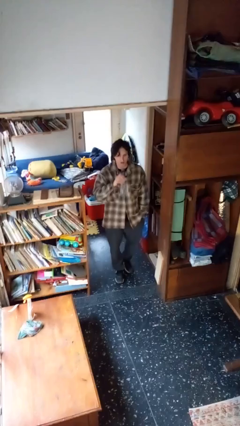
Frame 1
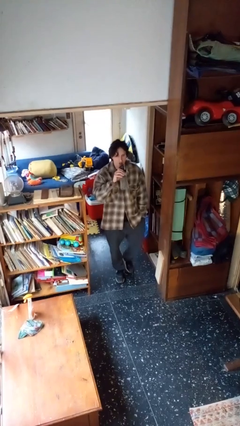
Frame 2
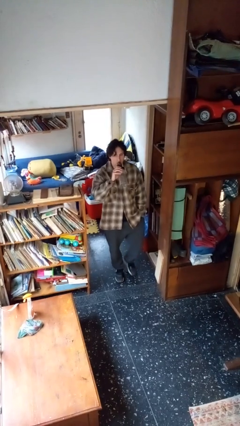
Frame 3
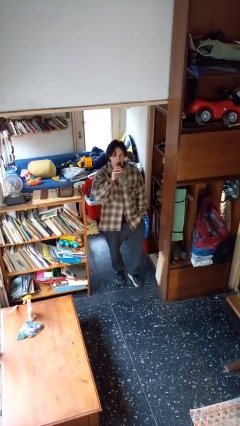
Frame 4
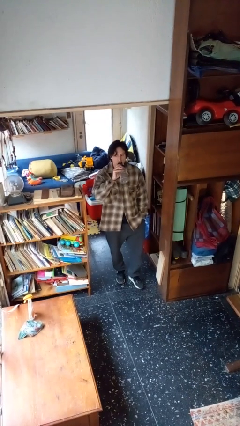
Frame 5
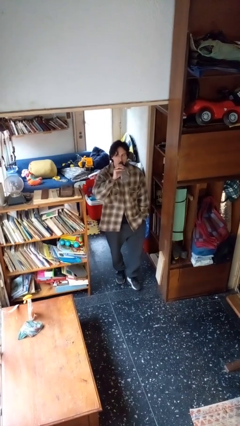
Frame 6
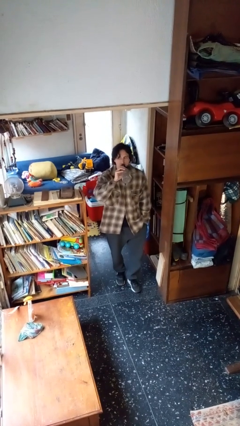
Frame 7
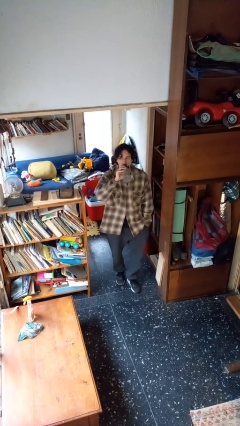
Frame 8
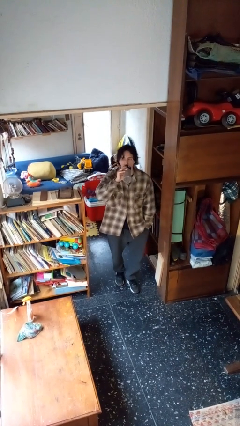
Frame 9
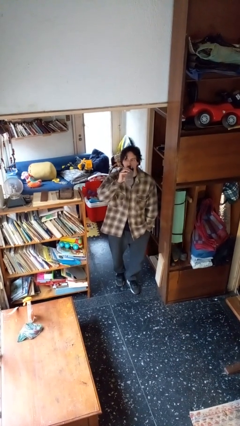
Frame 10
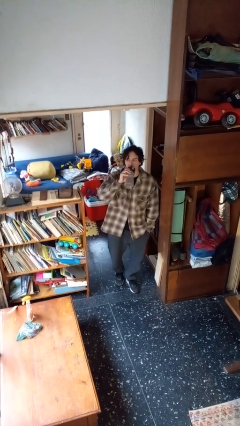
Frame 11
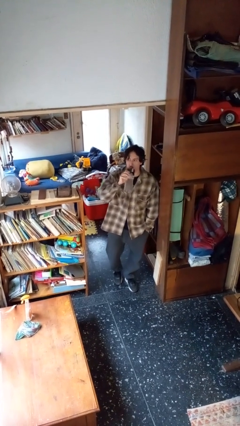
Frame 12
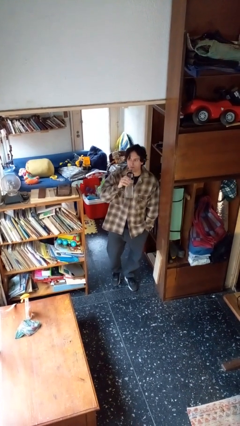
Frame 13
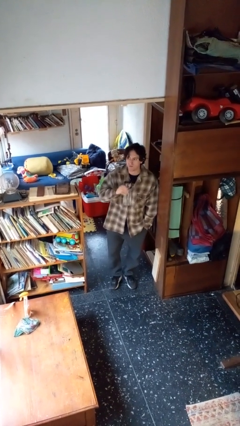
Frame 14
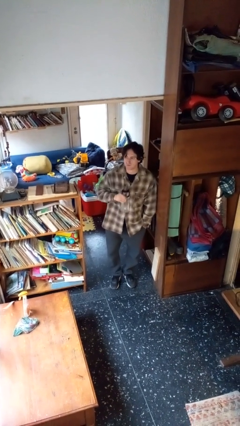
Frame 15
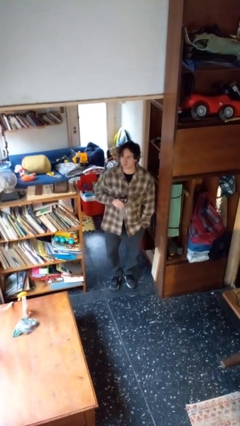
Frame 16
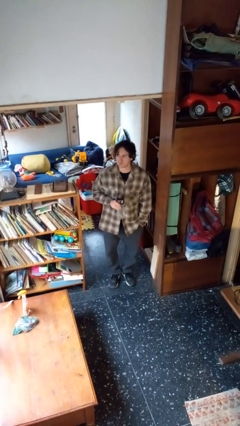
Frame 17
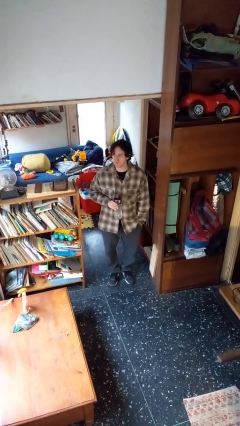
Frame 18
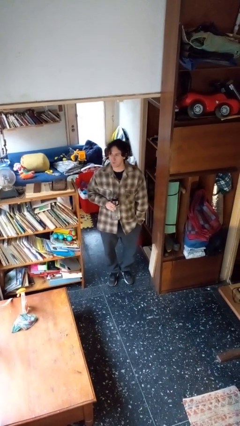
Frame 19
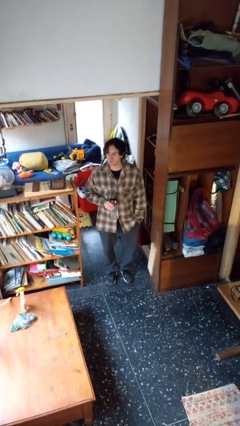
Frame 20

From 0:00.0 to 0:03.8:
person drinks from bottle

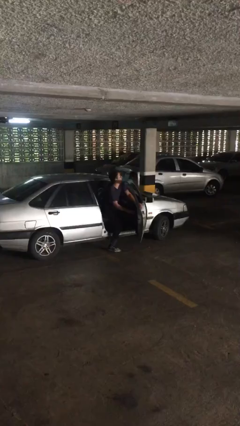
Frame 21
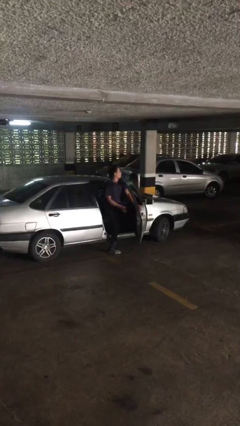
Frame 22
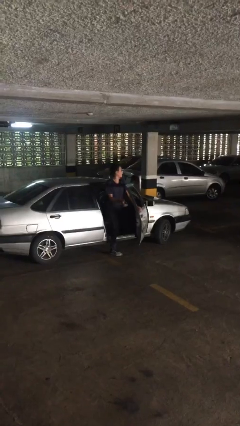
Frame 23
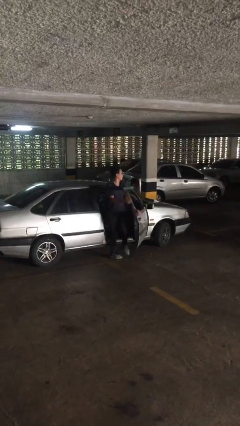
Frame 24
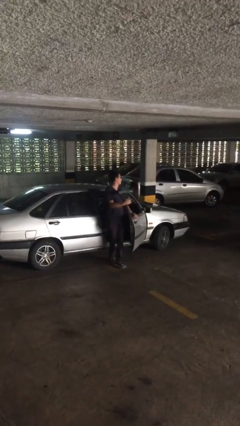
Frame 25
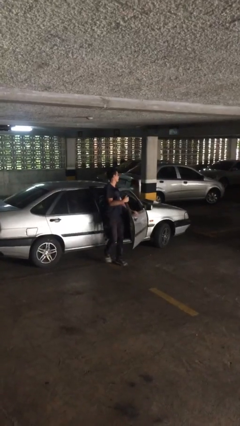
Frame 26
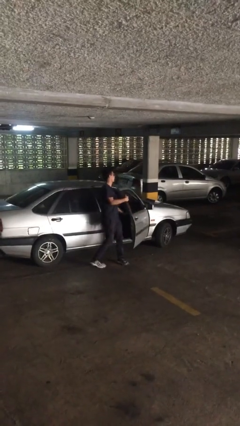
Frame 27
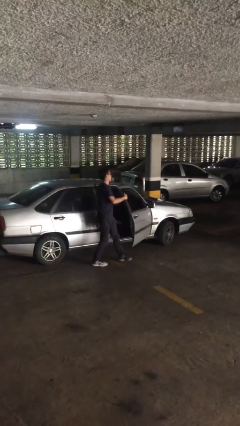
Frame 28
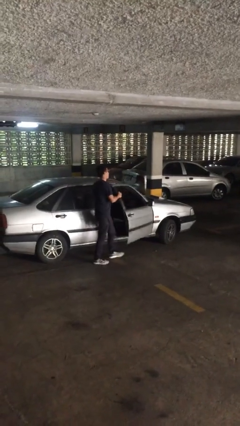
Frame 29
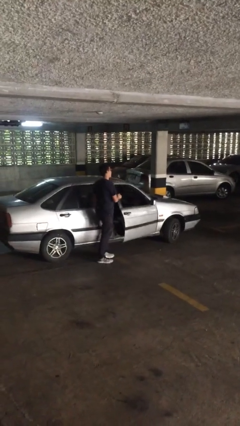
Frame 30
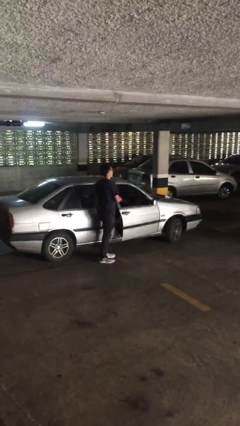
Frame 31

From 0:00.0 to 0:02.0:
person exits car

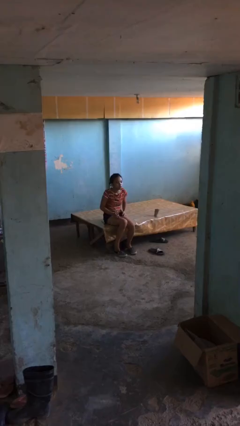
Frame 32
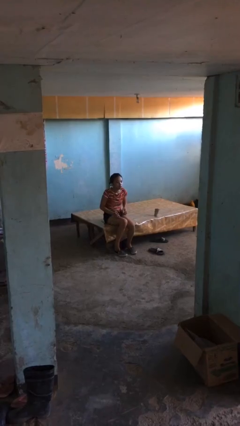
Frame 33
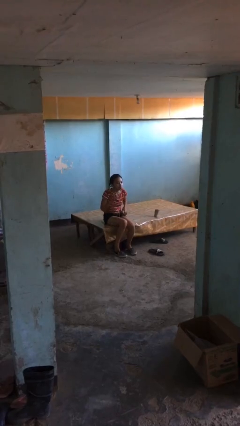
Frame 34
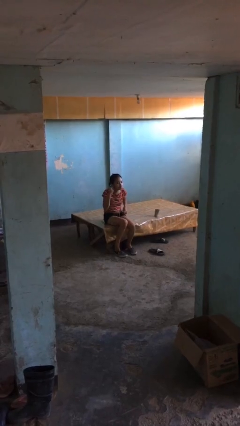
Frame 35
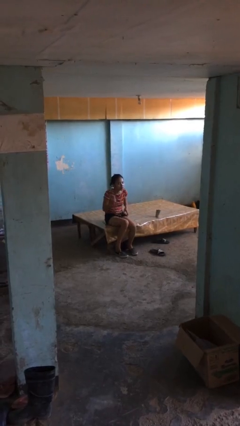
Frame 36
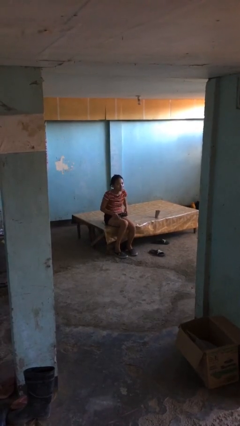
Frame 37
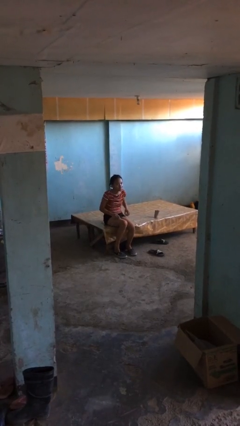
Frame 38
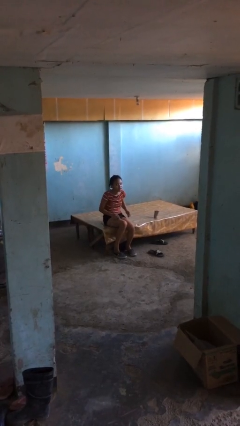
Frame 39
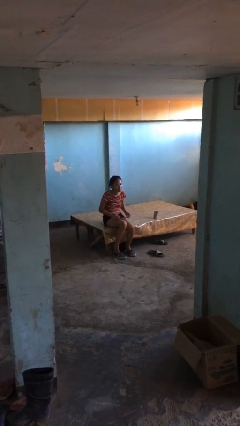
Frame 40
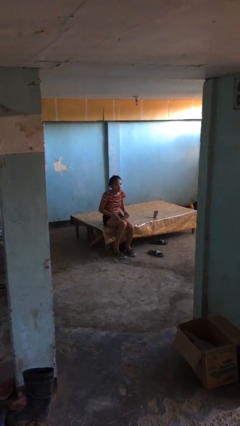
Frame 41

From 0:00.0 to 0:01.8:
person takes off headphones

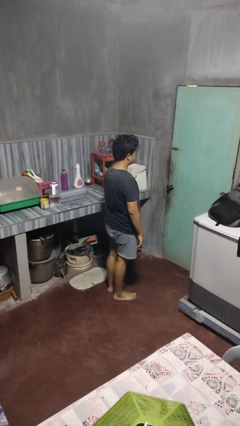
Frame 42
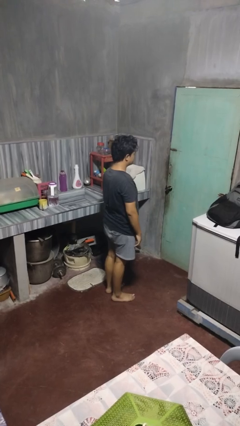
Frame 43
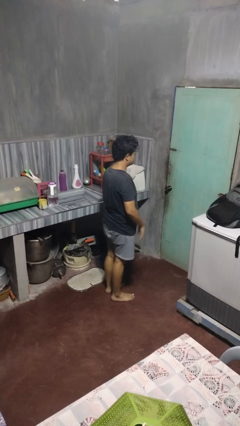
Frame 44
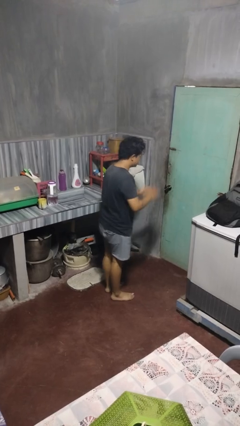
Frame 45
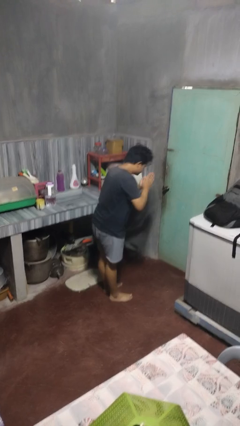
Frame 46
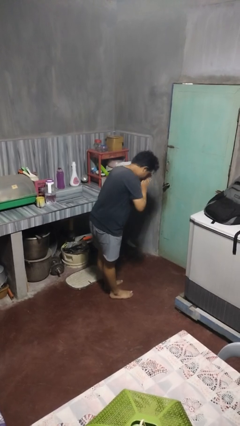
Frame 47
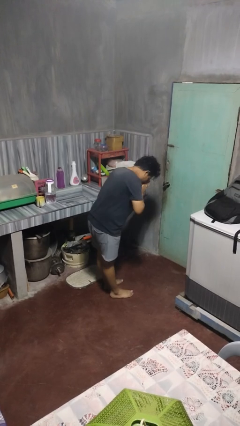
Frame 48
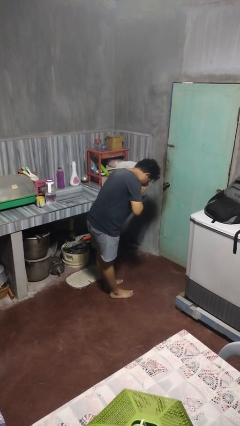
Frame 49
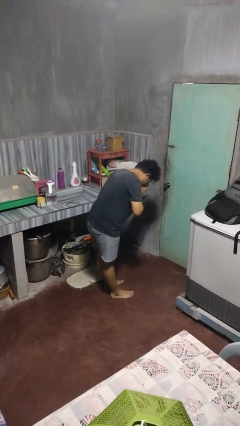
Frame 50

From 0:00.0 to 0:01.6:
person prays

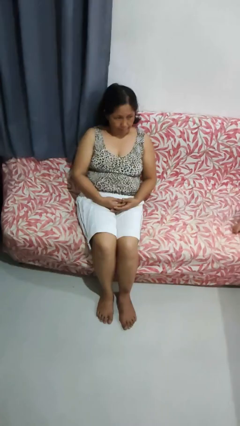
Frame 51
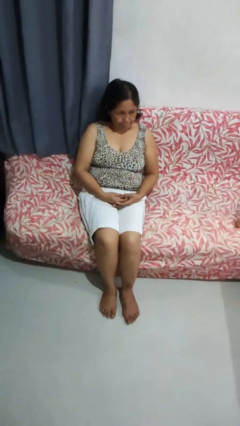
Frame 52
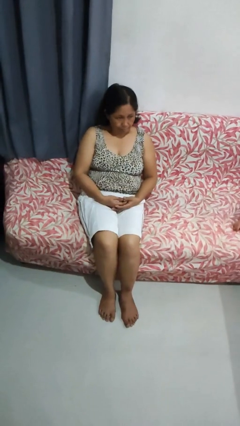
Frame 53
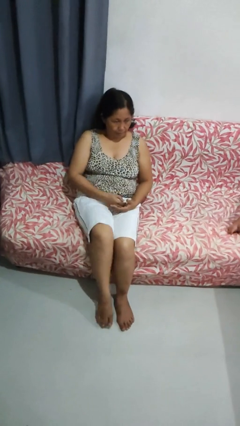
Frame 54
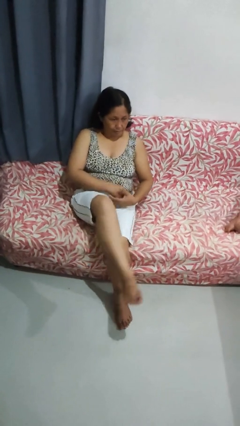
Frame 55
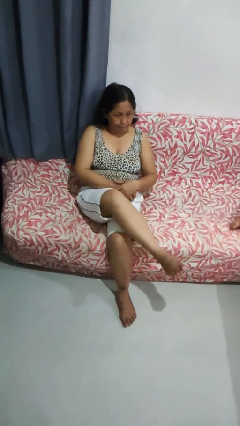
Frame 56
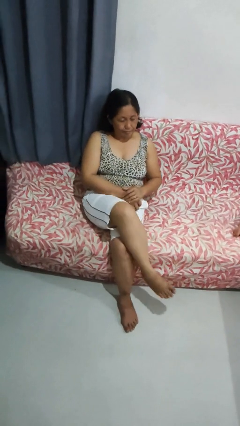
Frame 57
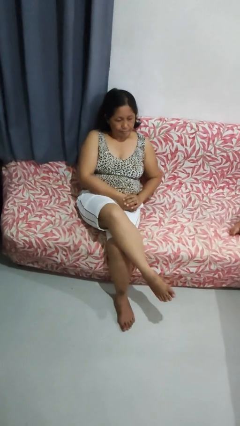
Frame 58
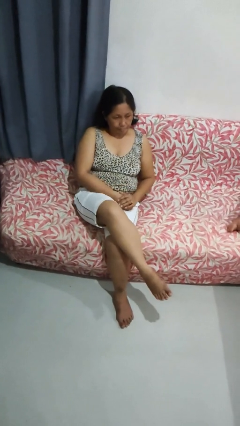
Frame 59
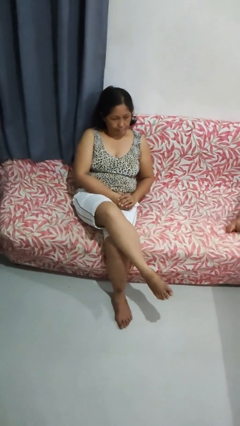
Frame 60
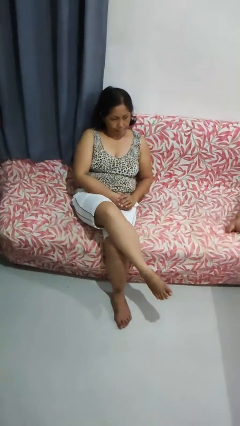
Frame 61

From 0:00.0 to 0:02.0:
person crosses legs

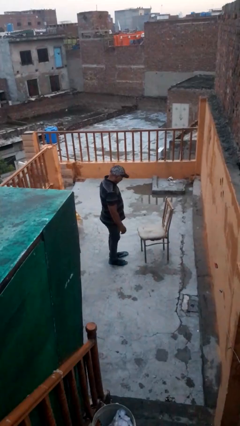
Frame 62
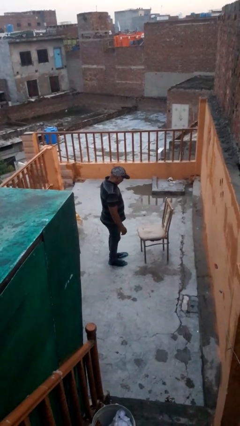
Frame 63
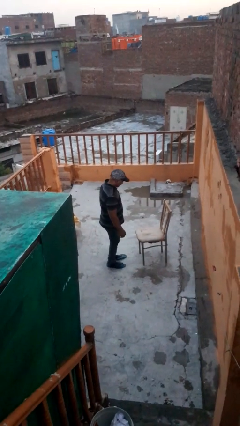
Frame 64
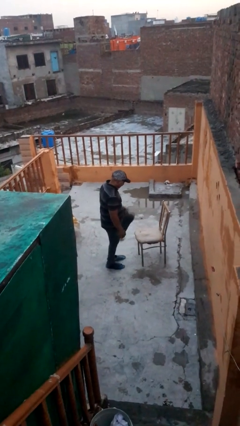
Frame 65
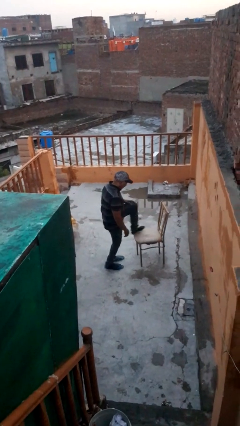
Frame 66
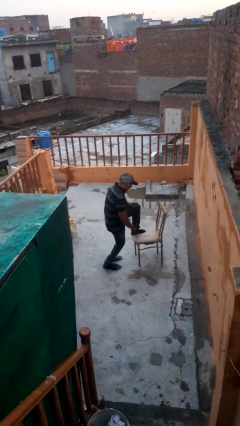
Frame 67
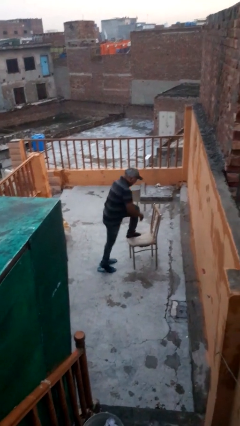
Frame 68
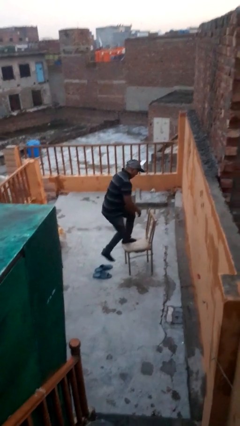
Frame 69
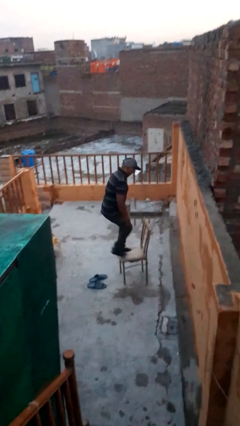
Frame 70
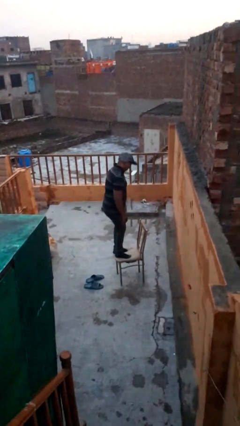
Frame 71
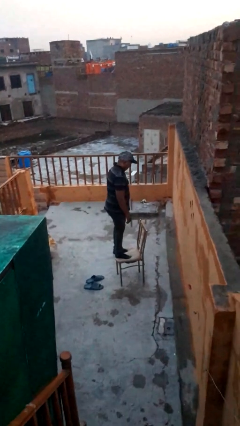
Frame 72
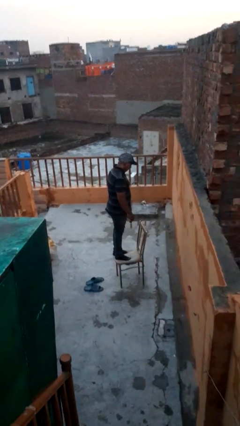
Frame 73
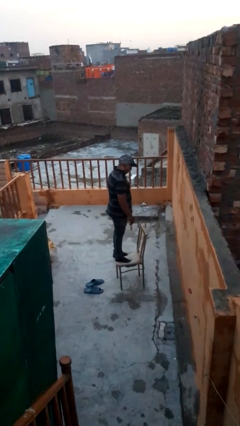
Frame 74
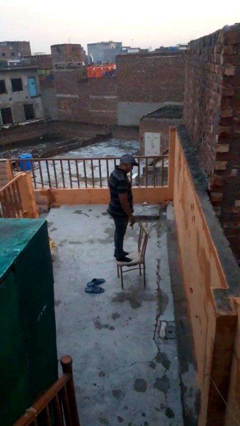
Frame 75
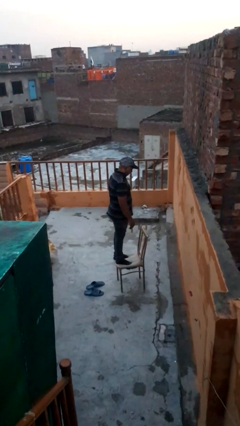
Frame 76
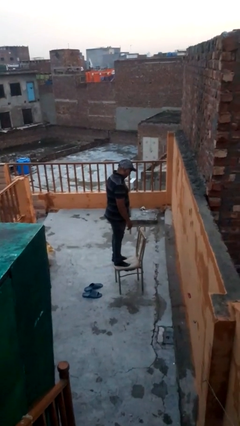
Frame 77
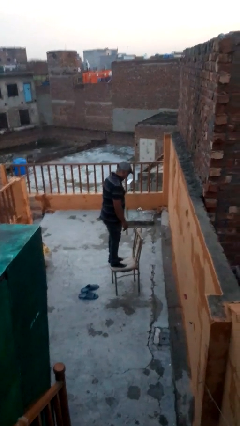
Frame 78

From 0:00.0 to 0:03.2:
person climbs on chair

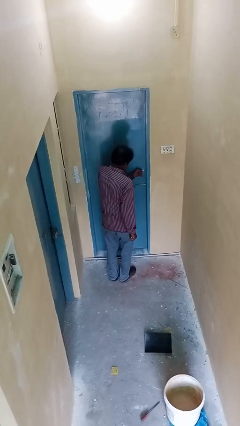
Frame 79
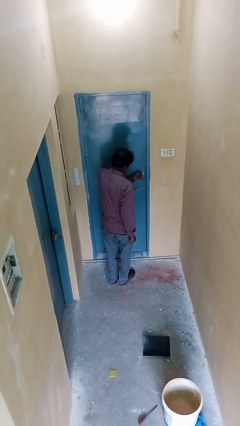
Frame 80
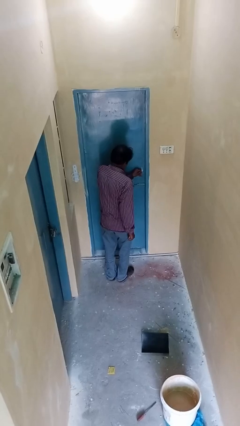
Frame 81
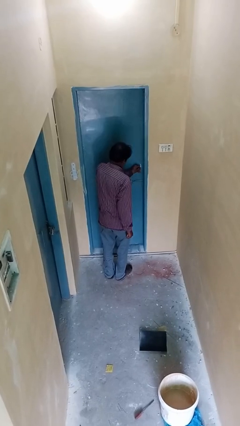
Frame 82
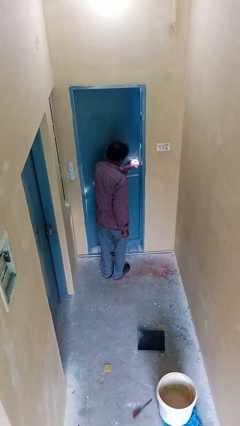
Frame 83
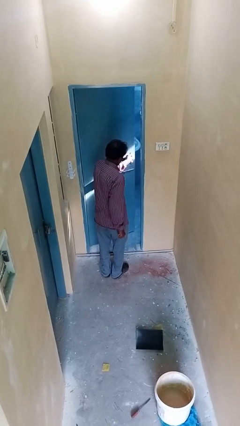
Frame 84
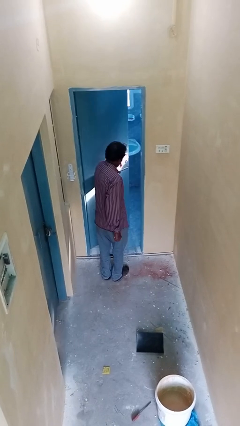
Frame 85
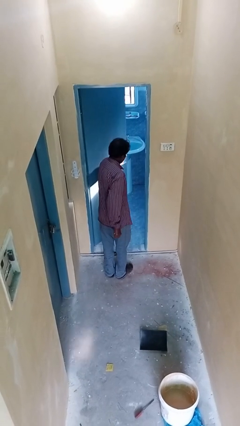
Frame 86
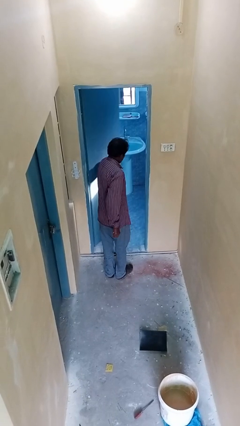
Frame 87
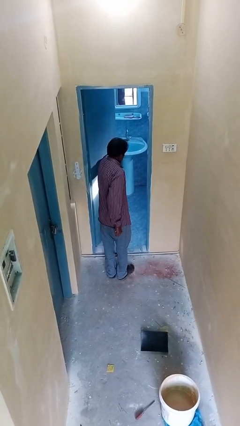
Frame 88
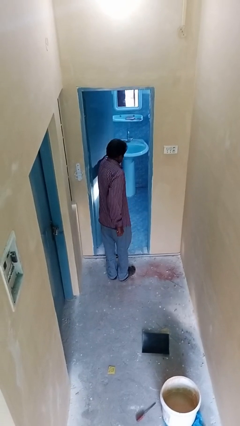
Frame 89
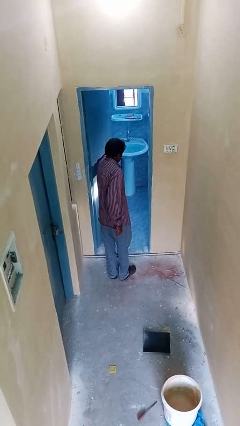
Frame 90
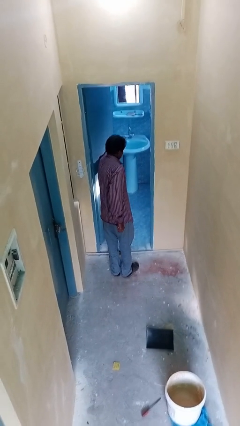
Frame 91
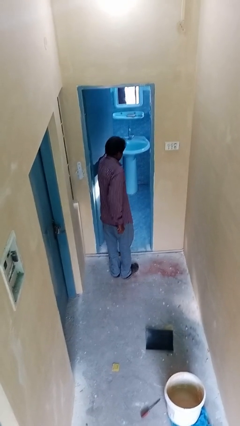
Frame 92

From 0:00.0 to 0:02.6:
person opens facility door

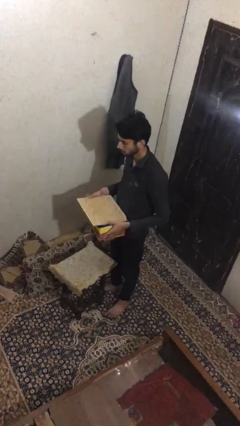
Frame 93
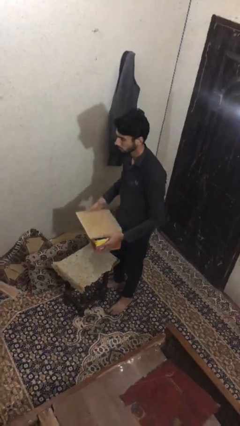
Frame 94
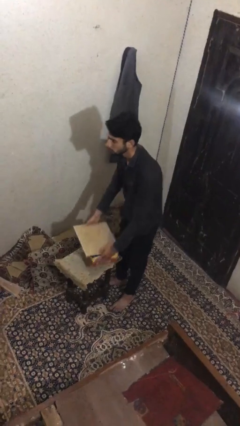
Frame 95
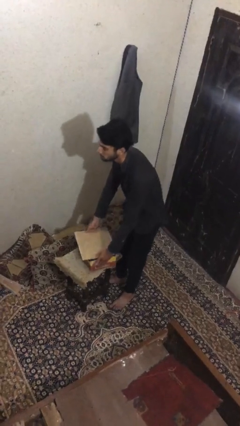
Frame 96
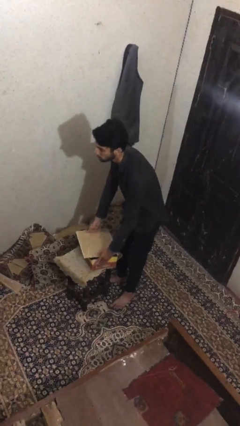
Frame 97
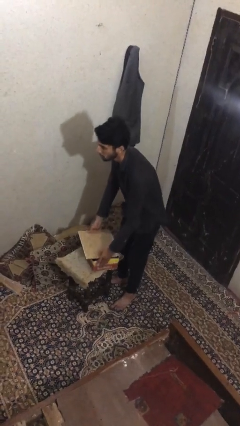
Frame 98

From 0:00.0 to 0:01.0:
person puts down object on table
